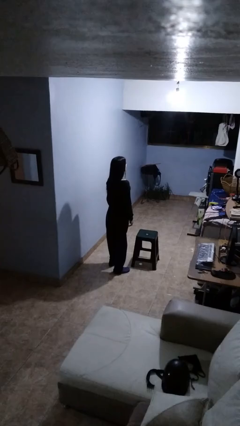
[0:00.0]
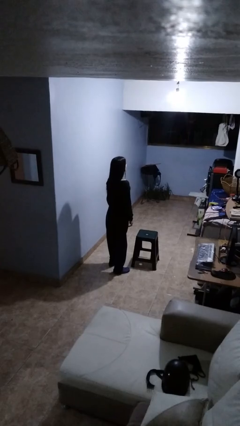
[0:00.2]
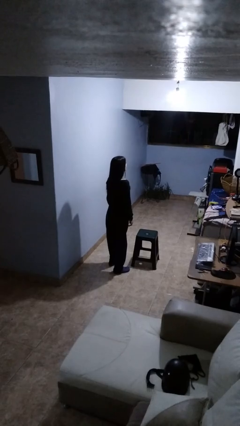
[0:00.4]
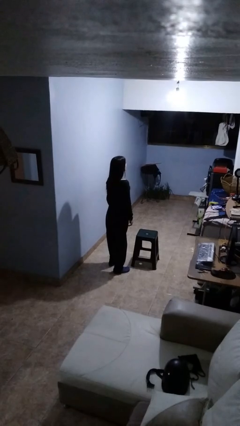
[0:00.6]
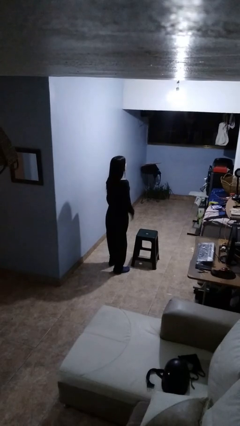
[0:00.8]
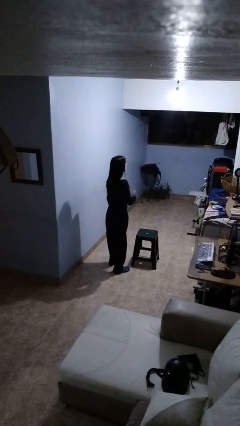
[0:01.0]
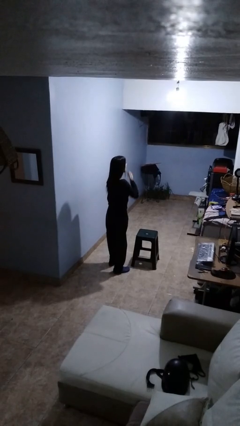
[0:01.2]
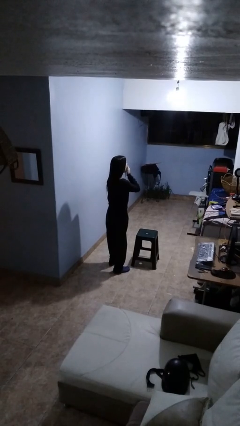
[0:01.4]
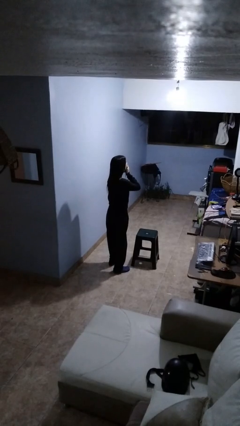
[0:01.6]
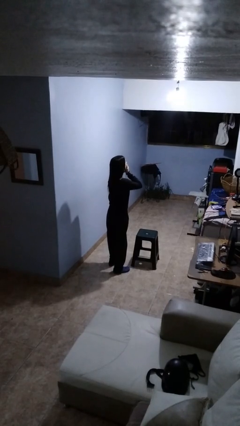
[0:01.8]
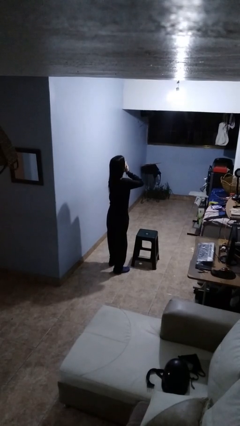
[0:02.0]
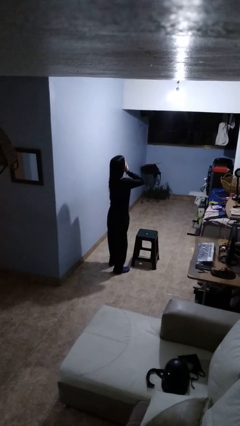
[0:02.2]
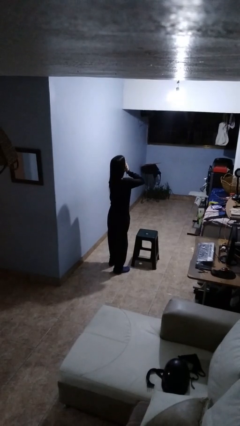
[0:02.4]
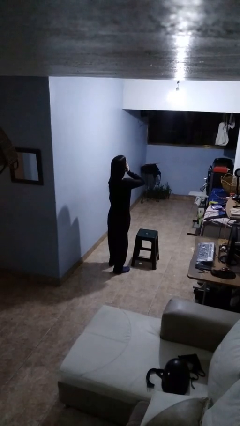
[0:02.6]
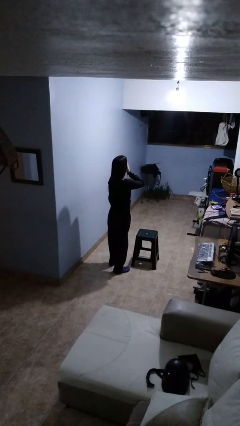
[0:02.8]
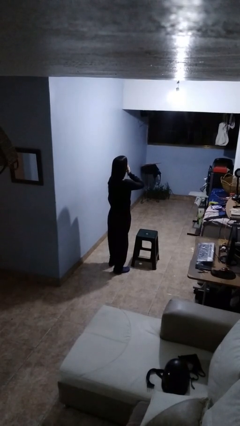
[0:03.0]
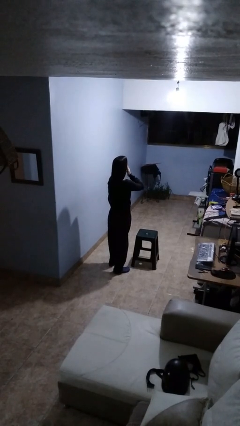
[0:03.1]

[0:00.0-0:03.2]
person yawns

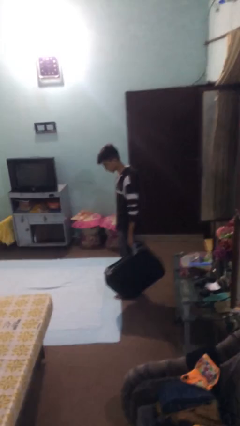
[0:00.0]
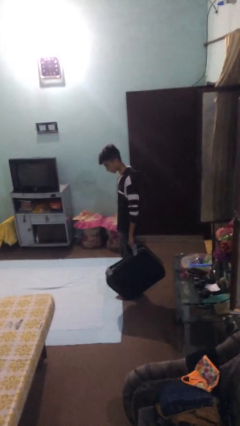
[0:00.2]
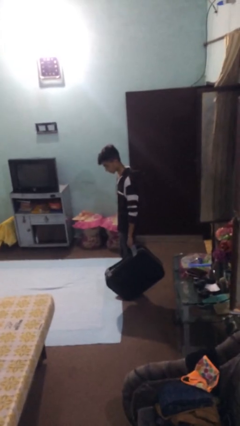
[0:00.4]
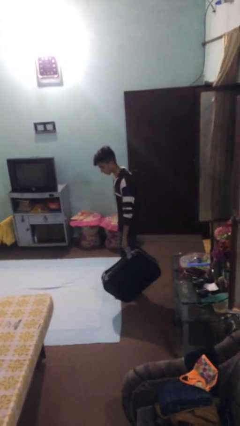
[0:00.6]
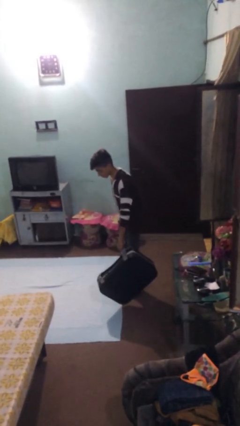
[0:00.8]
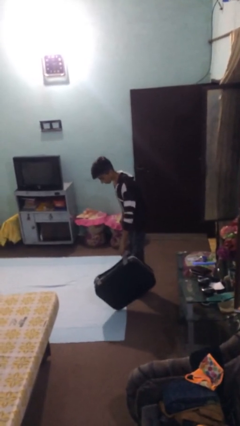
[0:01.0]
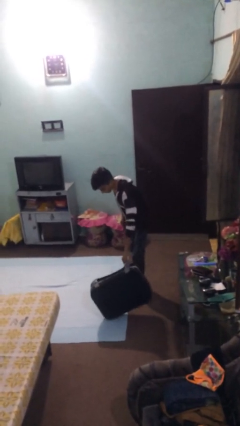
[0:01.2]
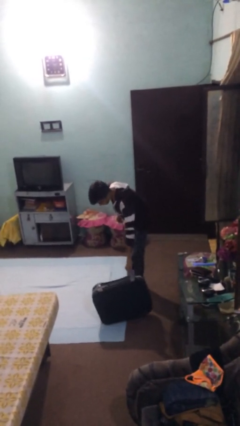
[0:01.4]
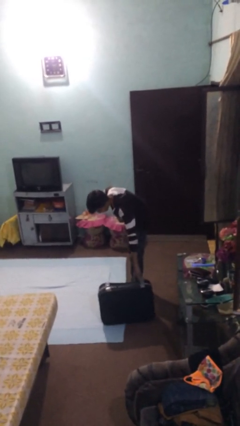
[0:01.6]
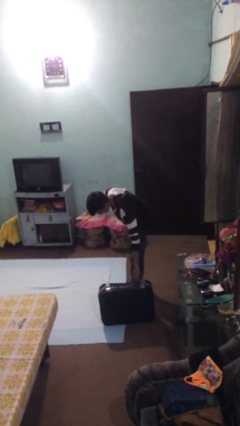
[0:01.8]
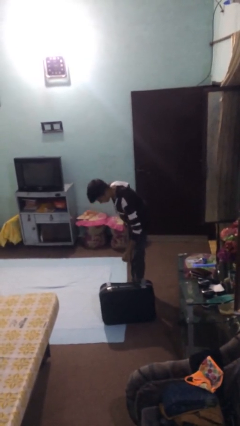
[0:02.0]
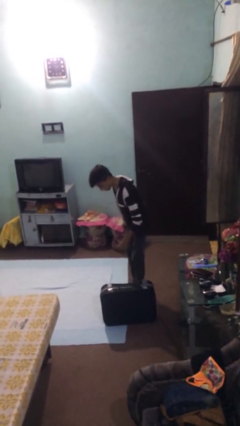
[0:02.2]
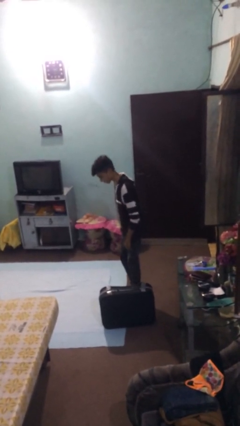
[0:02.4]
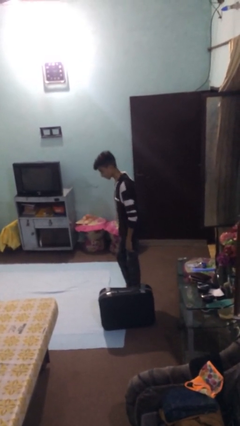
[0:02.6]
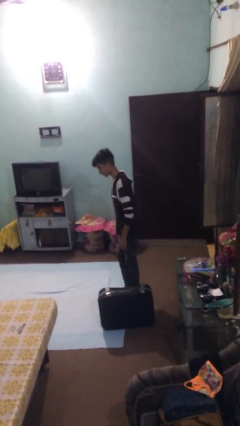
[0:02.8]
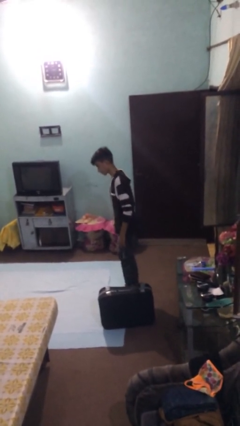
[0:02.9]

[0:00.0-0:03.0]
person puts down object on floor

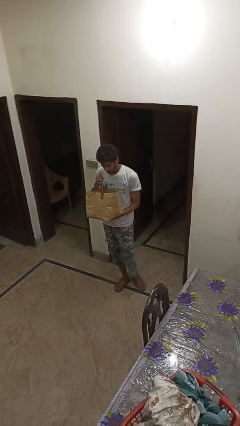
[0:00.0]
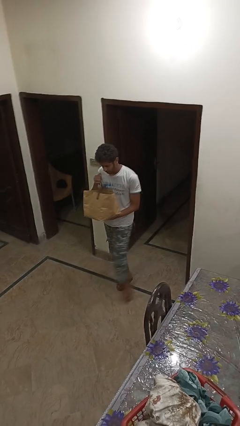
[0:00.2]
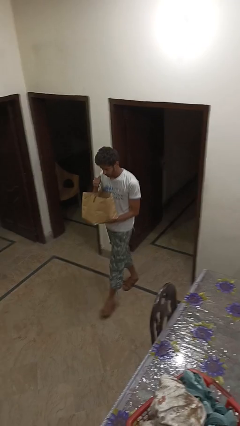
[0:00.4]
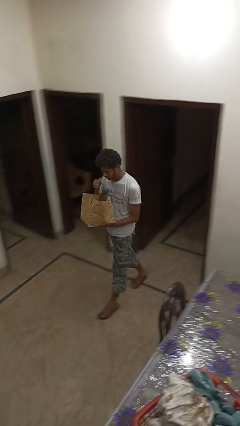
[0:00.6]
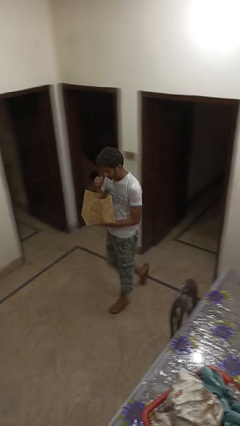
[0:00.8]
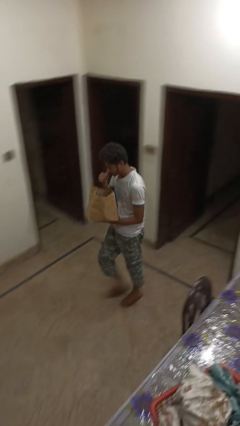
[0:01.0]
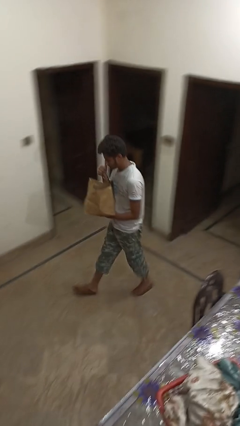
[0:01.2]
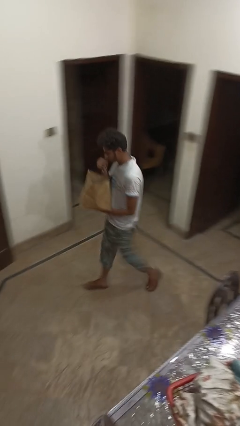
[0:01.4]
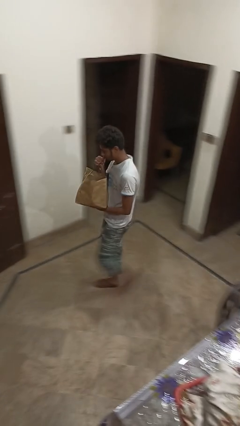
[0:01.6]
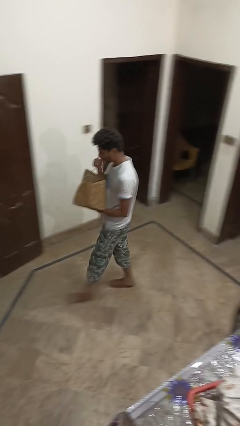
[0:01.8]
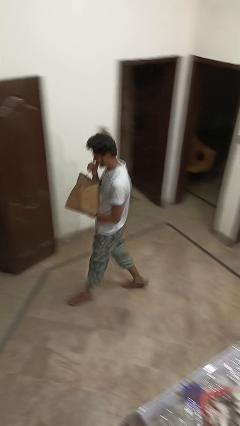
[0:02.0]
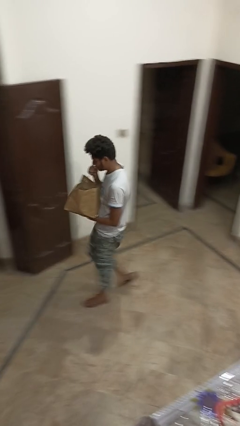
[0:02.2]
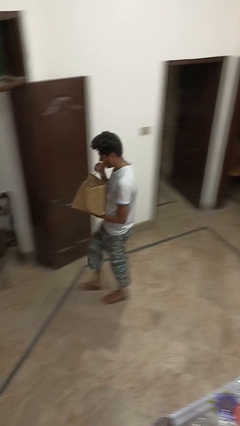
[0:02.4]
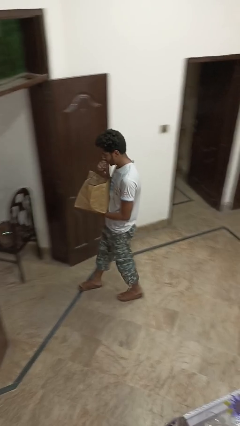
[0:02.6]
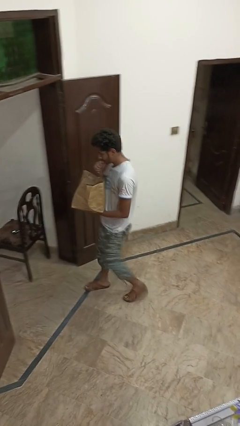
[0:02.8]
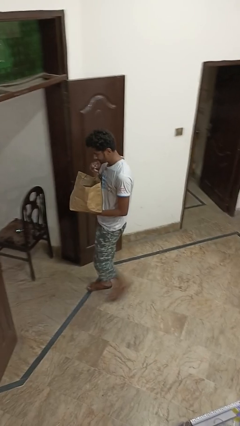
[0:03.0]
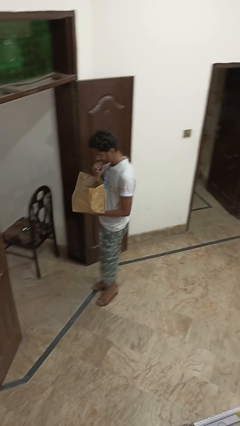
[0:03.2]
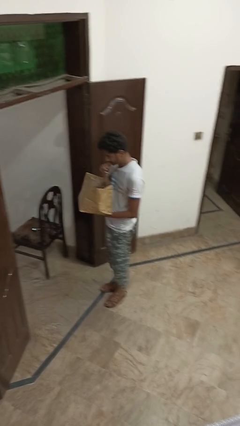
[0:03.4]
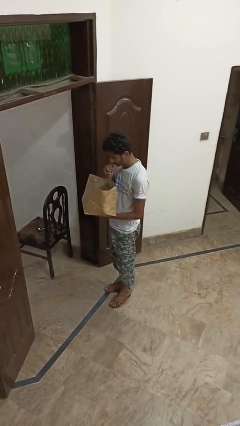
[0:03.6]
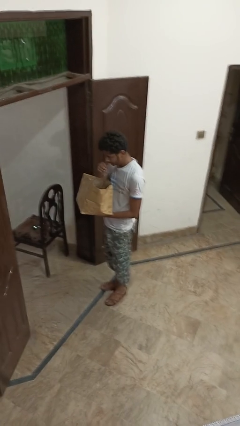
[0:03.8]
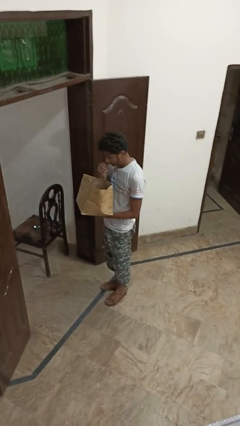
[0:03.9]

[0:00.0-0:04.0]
person carries groceries

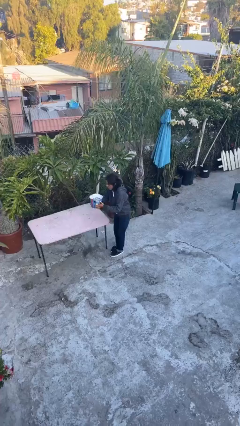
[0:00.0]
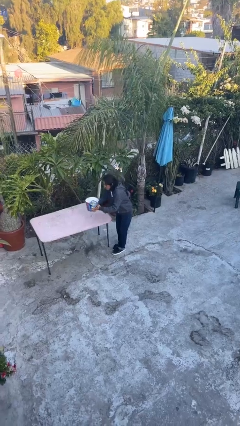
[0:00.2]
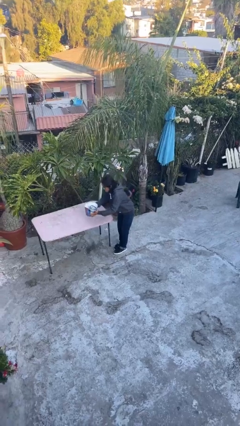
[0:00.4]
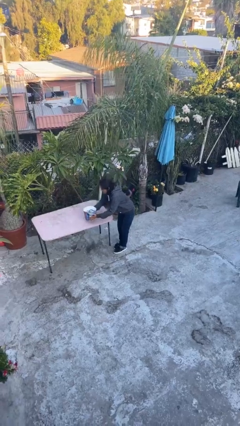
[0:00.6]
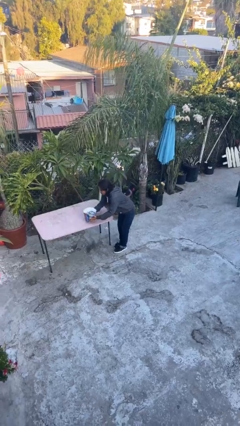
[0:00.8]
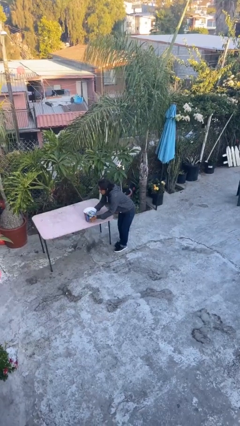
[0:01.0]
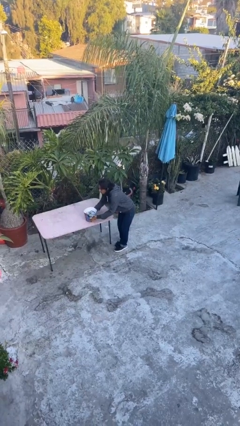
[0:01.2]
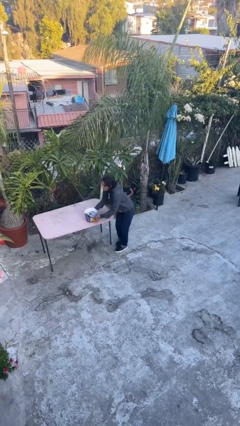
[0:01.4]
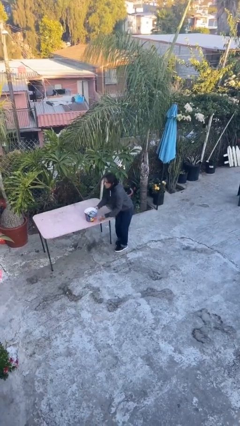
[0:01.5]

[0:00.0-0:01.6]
person puts down object on table

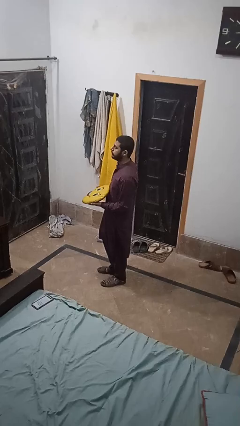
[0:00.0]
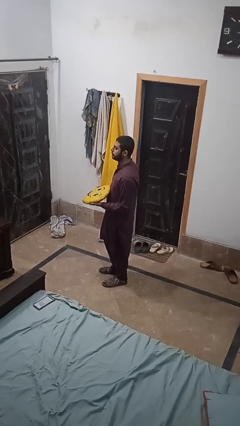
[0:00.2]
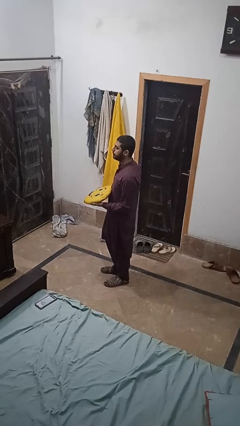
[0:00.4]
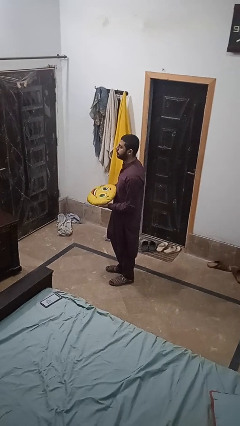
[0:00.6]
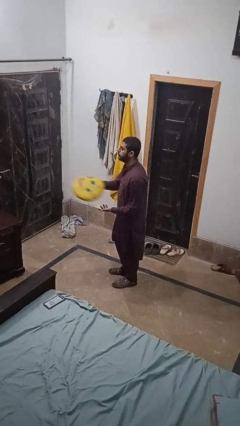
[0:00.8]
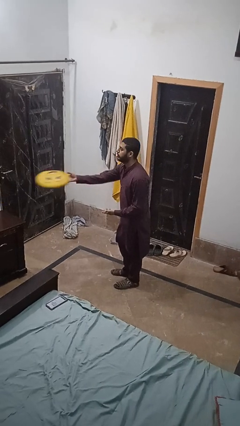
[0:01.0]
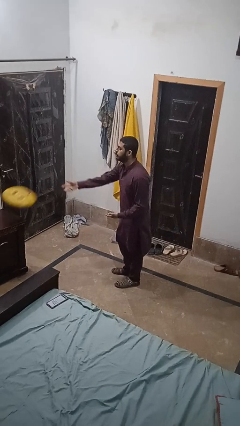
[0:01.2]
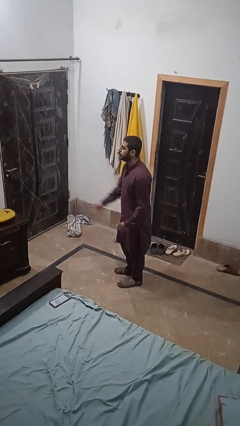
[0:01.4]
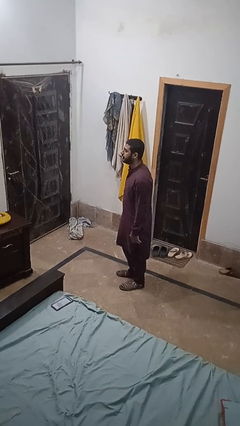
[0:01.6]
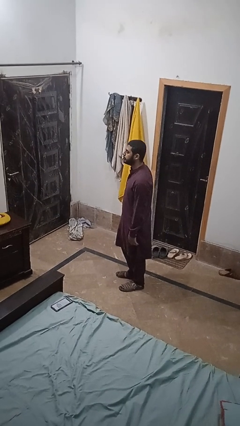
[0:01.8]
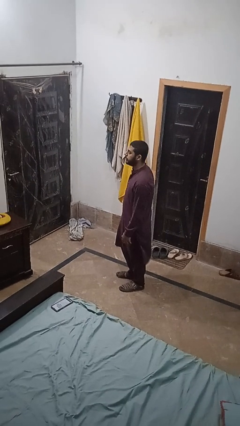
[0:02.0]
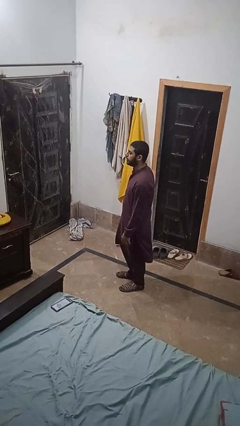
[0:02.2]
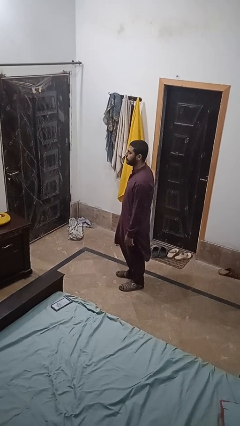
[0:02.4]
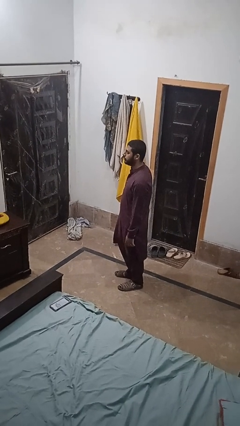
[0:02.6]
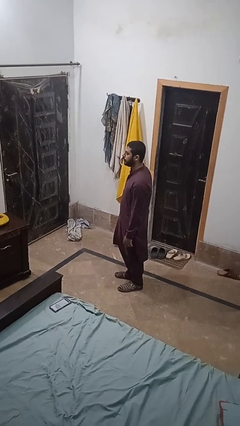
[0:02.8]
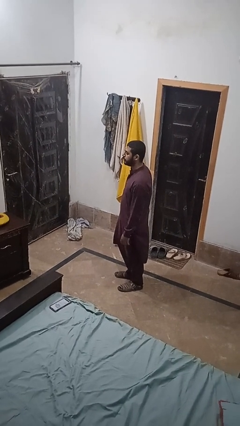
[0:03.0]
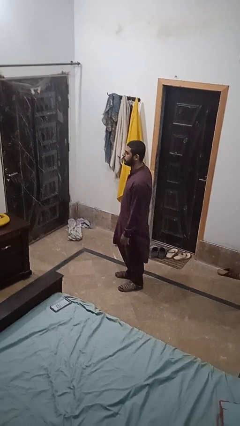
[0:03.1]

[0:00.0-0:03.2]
person throws object on table

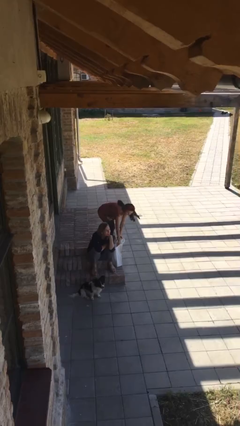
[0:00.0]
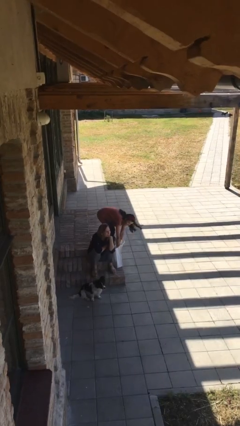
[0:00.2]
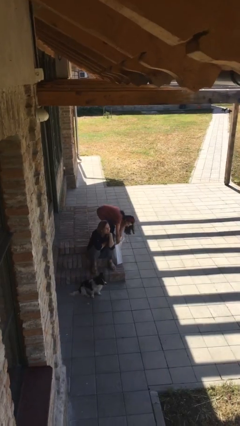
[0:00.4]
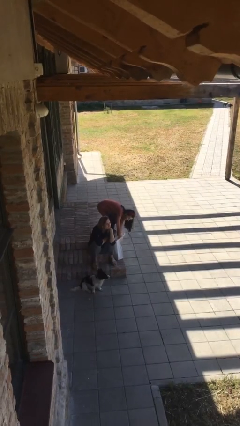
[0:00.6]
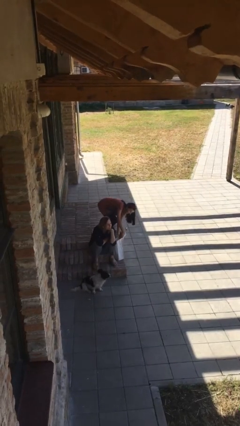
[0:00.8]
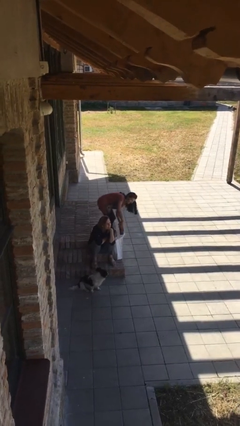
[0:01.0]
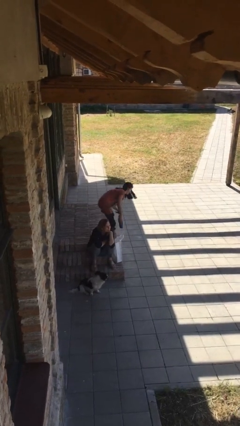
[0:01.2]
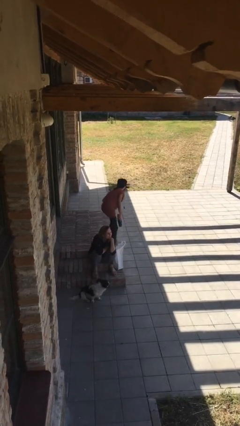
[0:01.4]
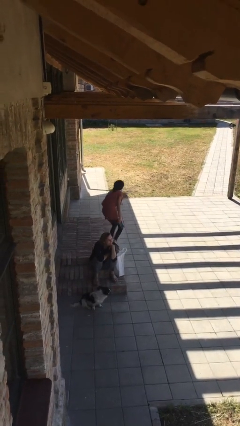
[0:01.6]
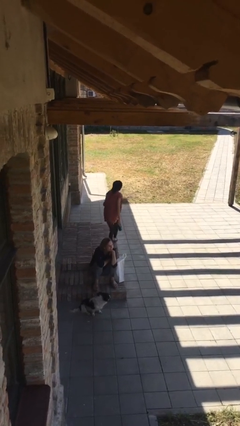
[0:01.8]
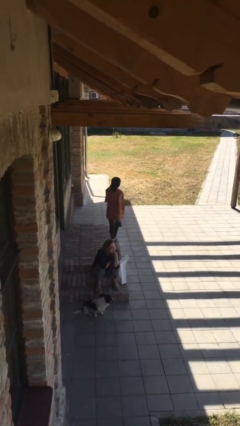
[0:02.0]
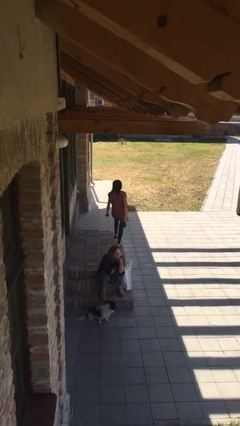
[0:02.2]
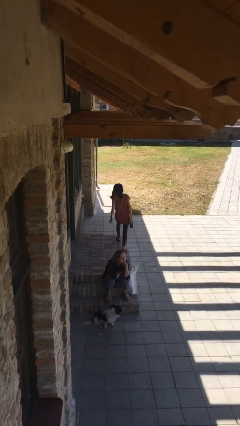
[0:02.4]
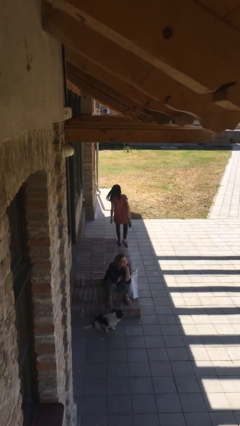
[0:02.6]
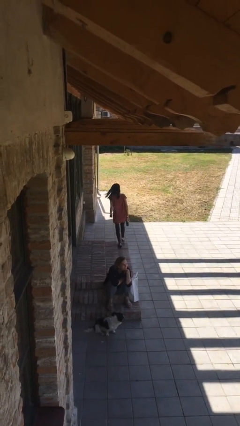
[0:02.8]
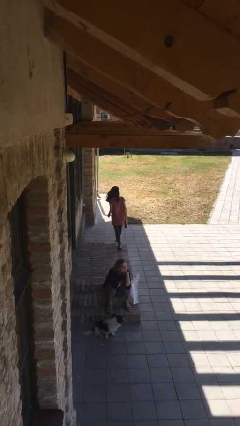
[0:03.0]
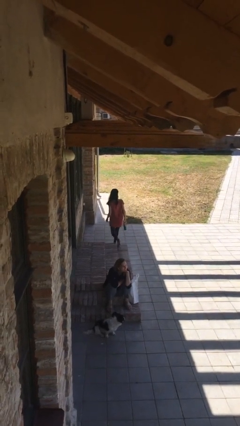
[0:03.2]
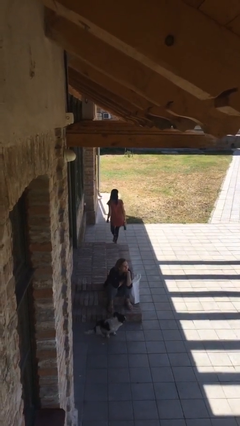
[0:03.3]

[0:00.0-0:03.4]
person steals object from person
